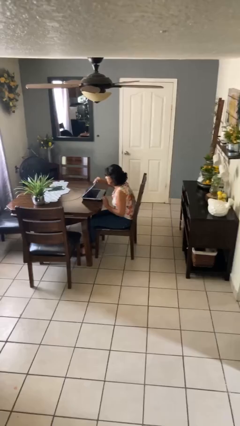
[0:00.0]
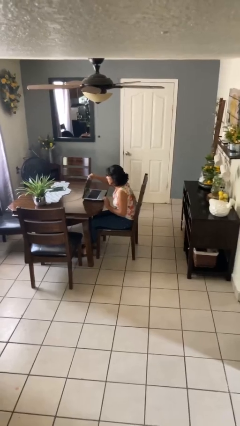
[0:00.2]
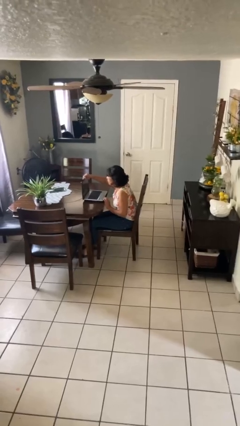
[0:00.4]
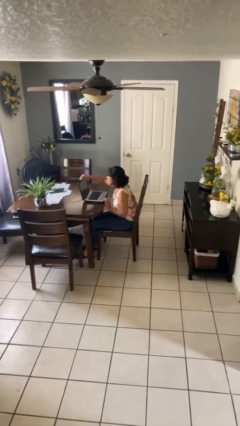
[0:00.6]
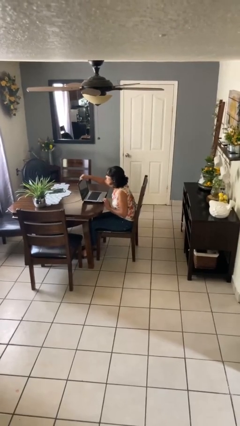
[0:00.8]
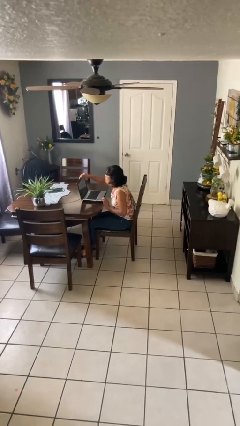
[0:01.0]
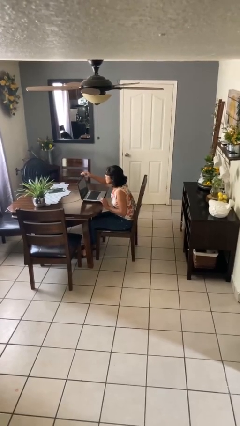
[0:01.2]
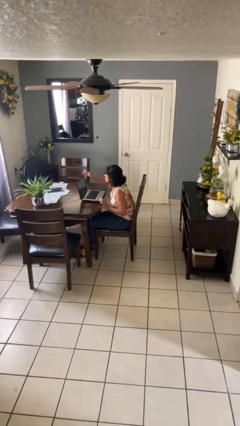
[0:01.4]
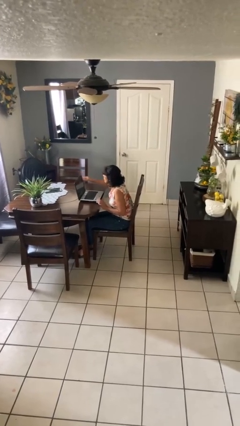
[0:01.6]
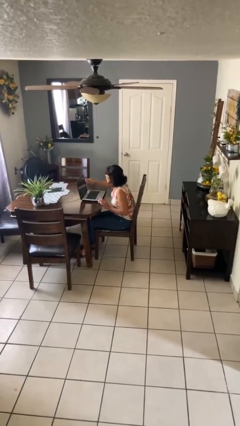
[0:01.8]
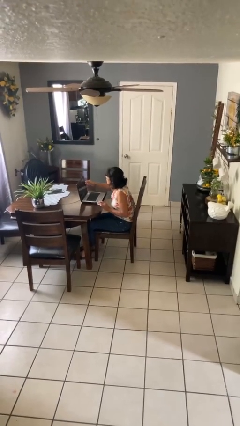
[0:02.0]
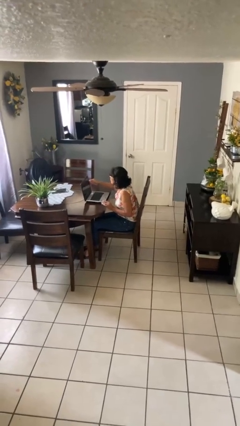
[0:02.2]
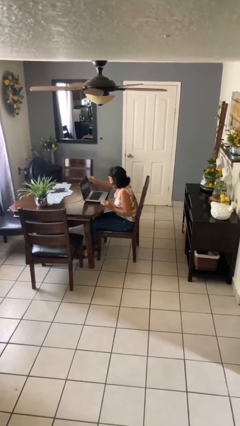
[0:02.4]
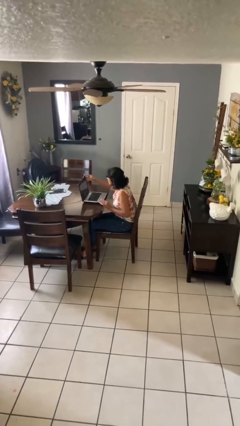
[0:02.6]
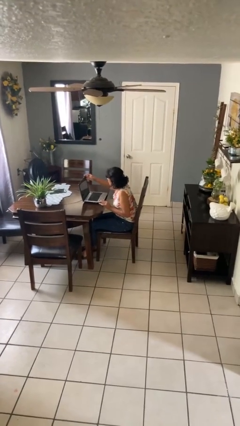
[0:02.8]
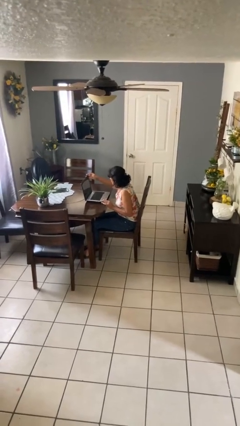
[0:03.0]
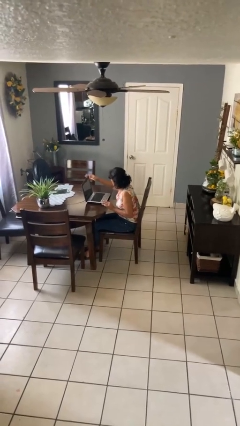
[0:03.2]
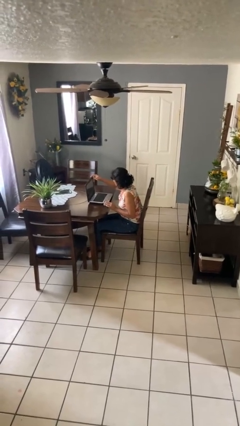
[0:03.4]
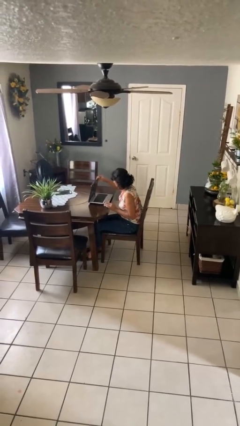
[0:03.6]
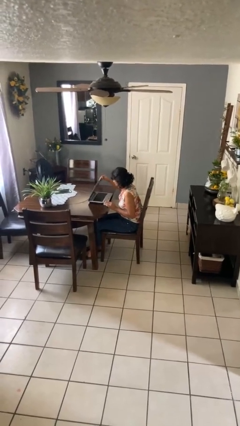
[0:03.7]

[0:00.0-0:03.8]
person opens laptop

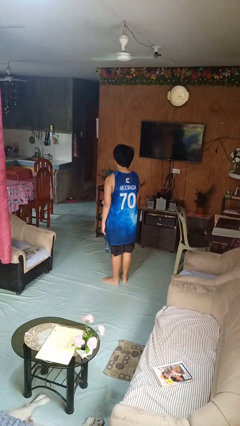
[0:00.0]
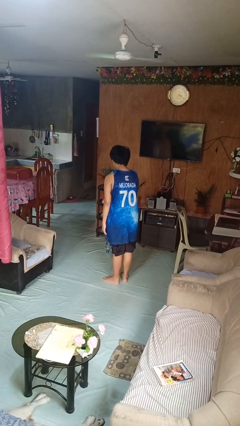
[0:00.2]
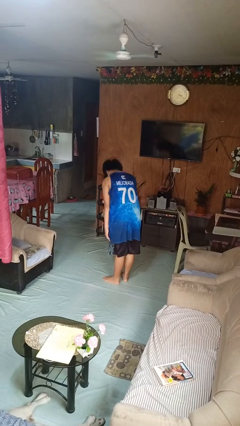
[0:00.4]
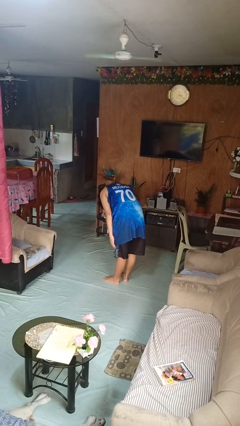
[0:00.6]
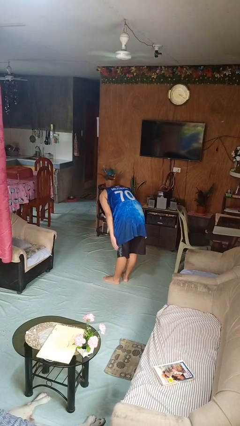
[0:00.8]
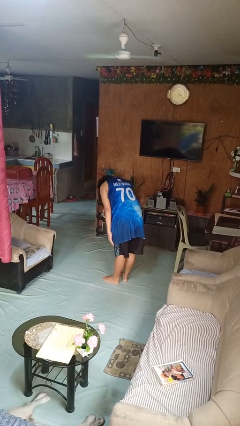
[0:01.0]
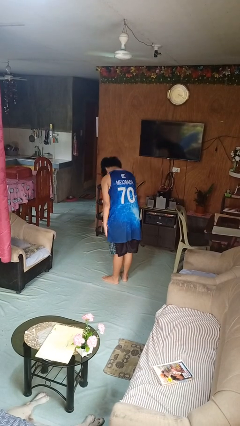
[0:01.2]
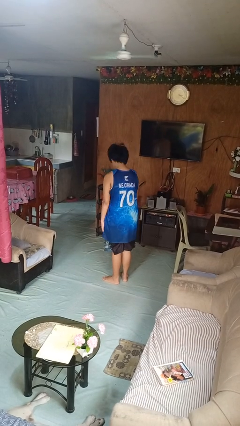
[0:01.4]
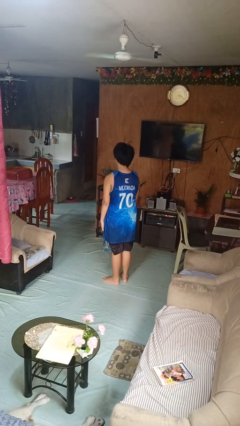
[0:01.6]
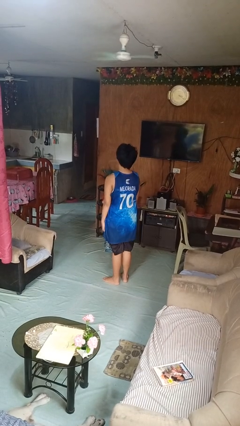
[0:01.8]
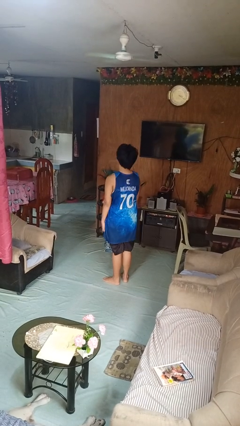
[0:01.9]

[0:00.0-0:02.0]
person bows

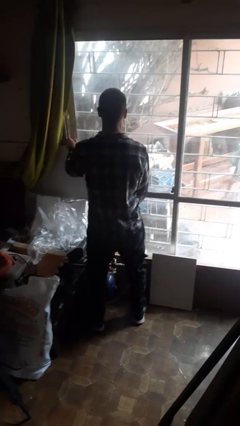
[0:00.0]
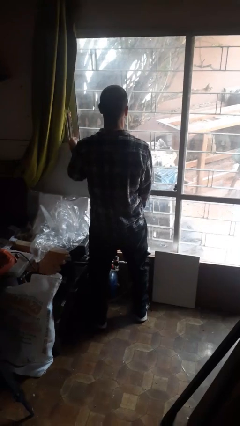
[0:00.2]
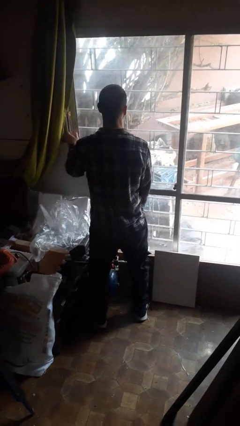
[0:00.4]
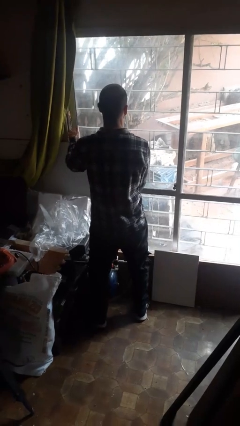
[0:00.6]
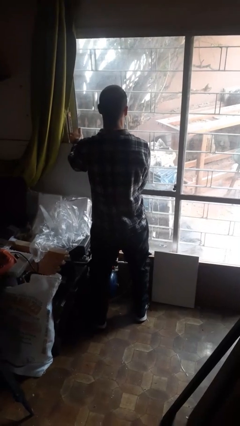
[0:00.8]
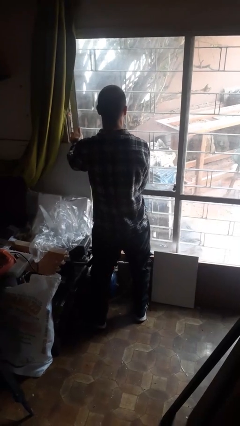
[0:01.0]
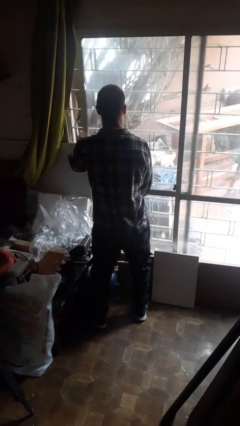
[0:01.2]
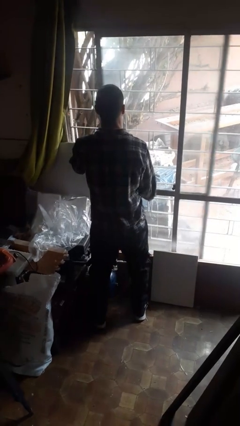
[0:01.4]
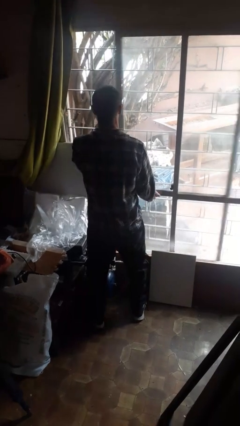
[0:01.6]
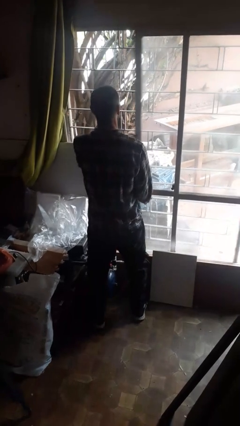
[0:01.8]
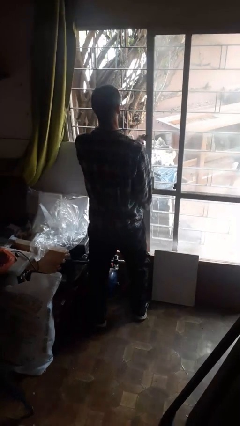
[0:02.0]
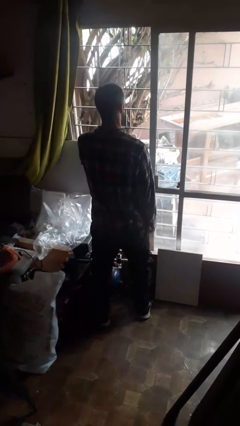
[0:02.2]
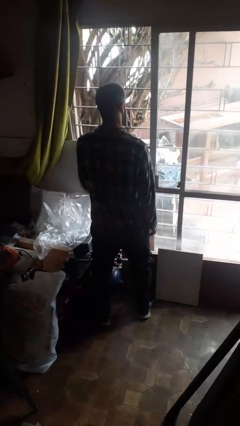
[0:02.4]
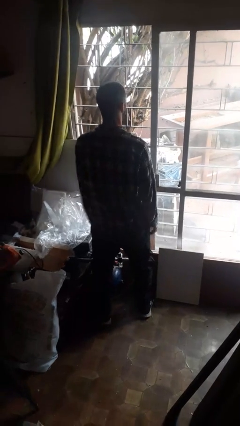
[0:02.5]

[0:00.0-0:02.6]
person opens sliding door

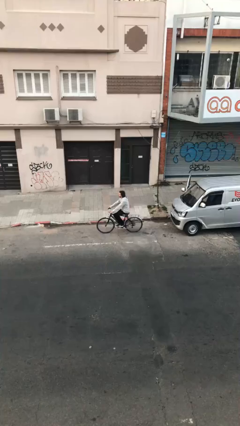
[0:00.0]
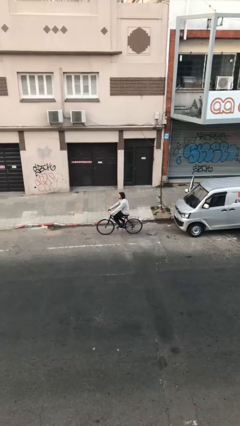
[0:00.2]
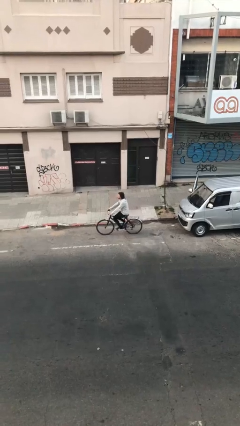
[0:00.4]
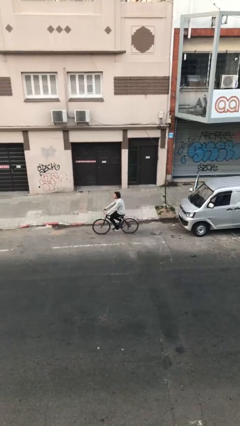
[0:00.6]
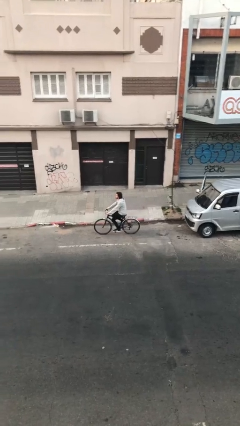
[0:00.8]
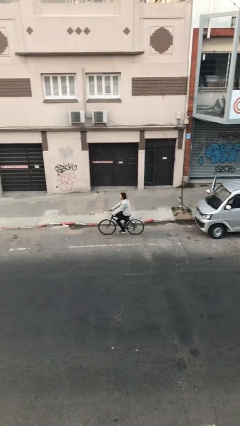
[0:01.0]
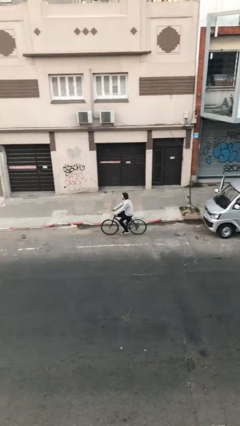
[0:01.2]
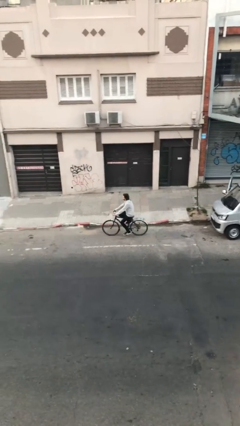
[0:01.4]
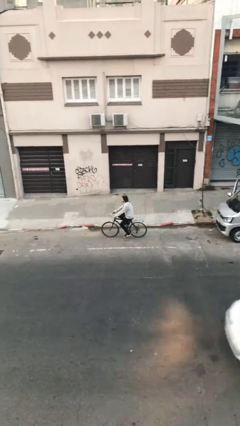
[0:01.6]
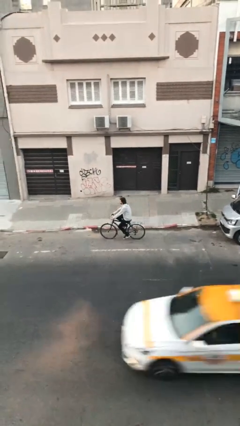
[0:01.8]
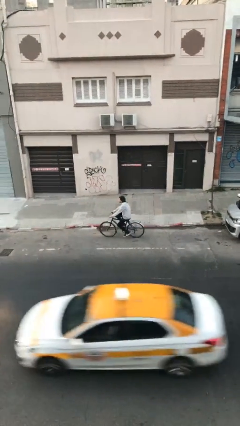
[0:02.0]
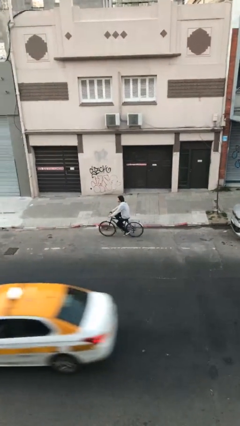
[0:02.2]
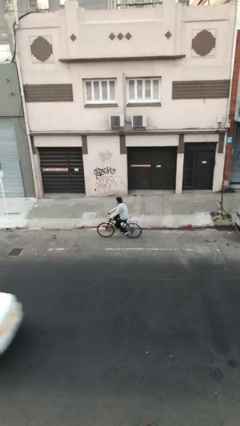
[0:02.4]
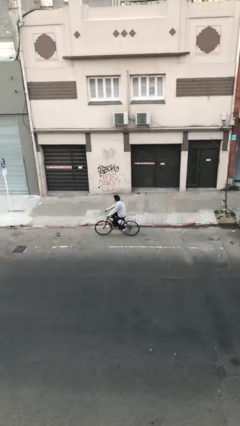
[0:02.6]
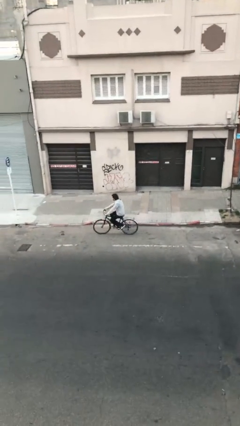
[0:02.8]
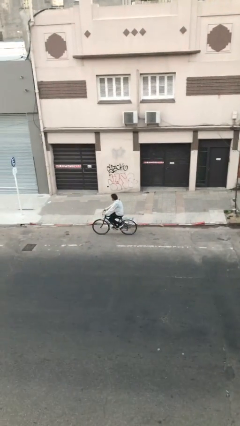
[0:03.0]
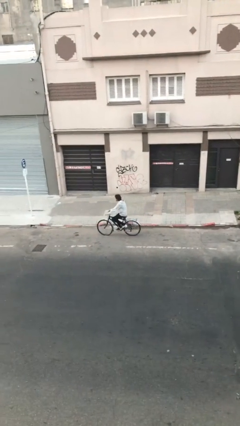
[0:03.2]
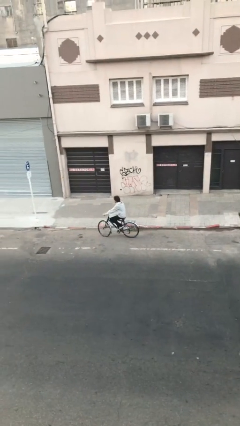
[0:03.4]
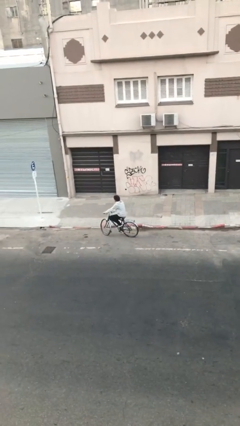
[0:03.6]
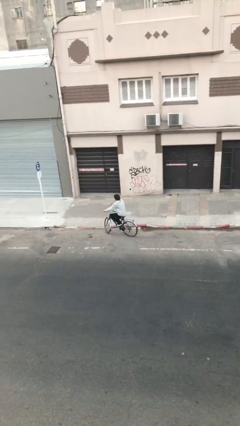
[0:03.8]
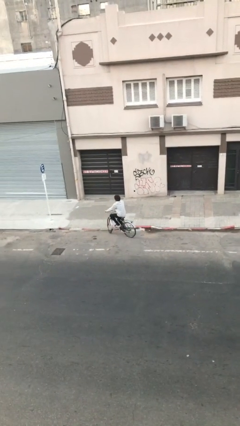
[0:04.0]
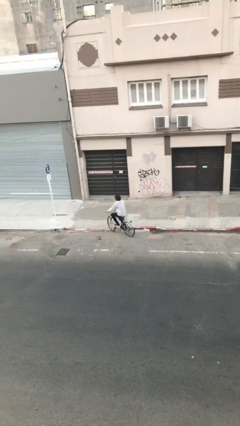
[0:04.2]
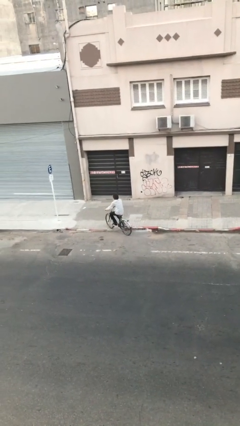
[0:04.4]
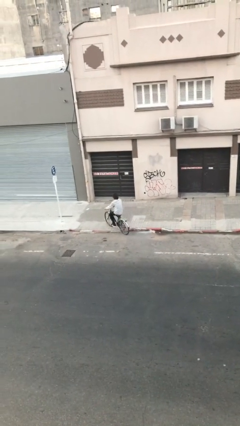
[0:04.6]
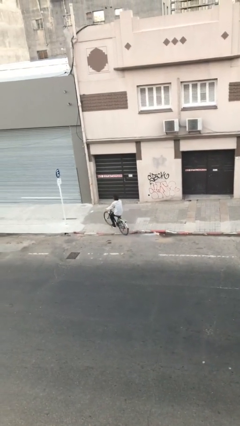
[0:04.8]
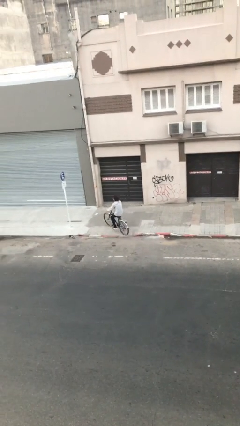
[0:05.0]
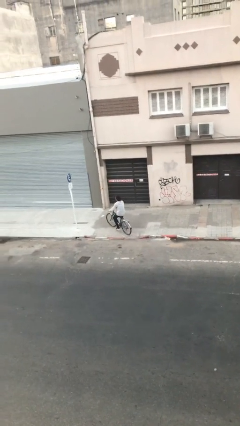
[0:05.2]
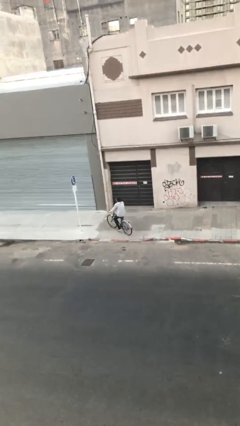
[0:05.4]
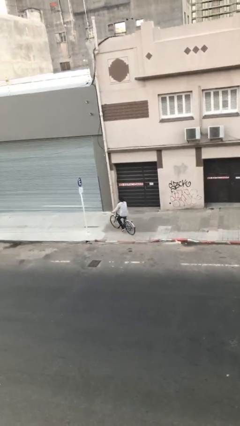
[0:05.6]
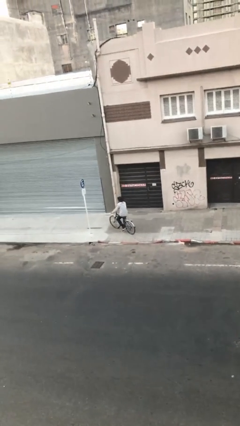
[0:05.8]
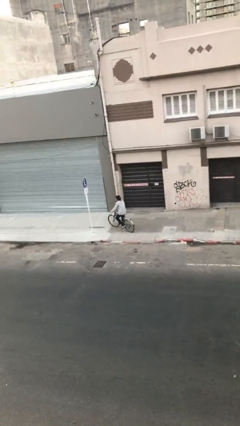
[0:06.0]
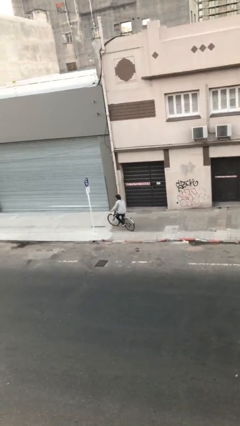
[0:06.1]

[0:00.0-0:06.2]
person rides bicycle

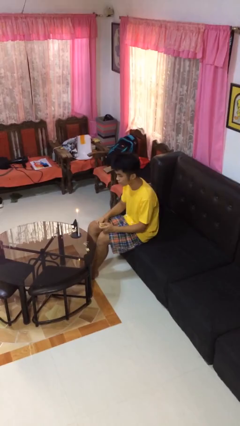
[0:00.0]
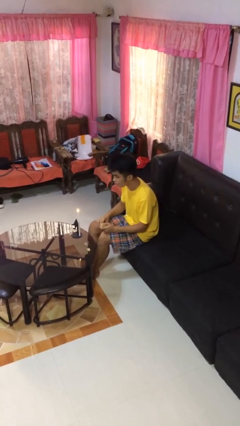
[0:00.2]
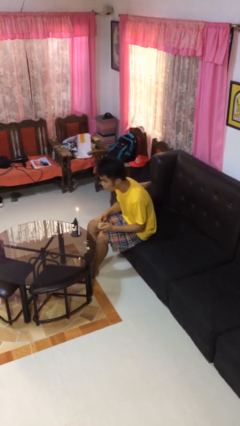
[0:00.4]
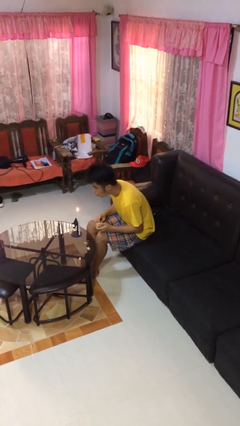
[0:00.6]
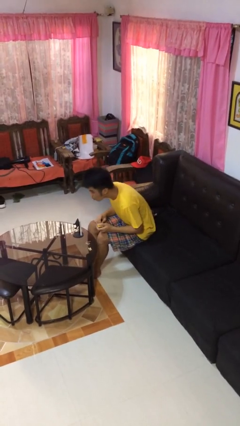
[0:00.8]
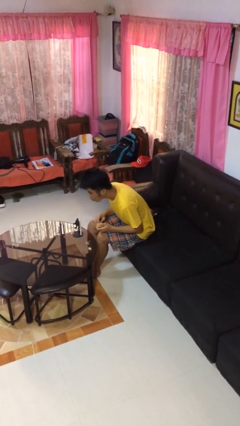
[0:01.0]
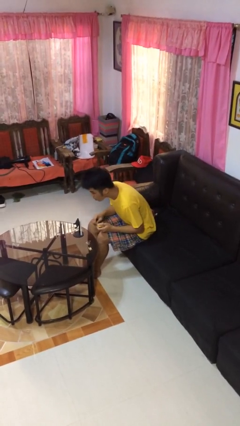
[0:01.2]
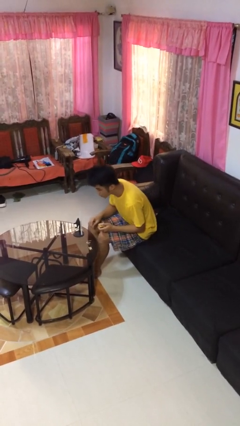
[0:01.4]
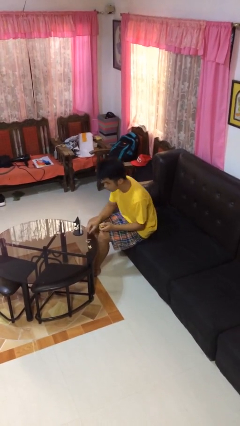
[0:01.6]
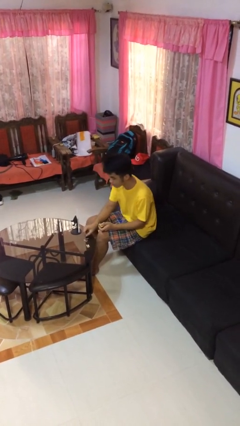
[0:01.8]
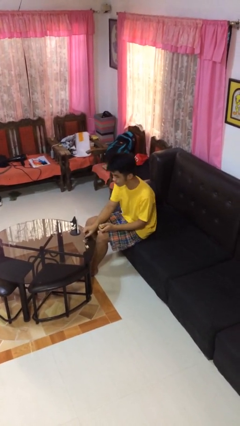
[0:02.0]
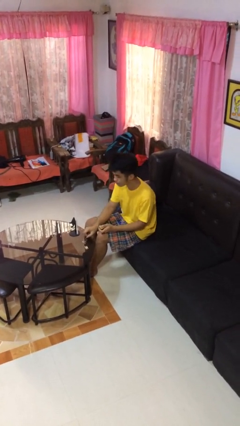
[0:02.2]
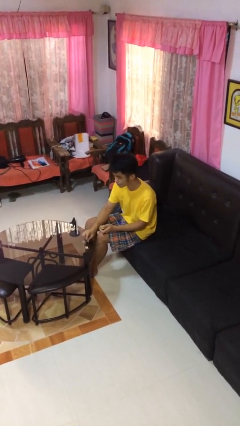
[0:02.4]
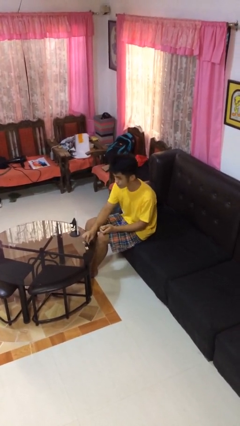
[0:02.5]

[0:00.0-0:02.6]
person extinguishes candle

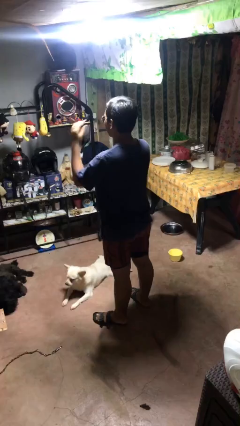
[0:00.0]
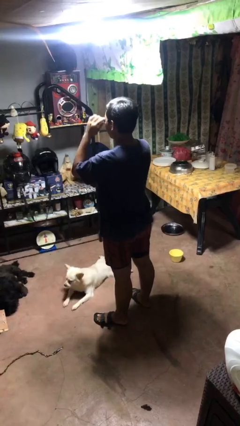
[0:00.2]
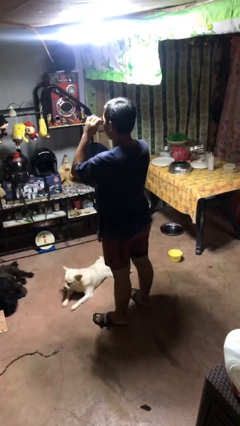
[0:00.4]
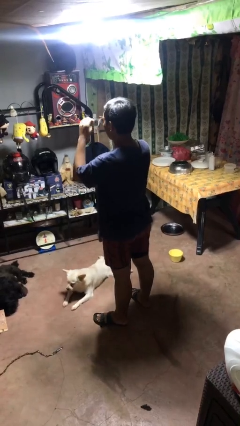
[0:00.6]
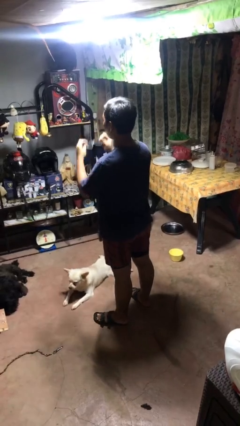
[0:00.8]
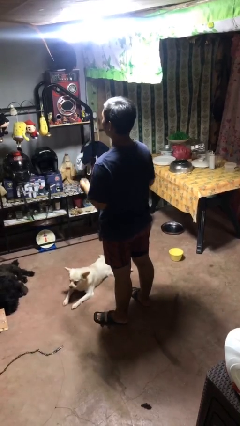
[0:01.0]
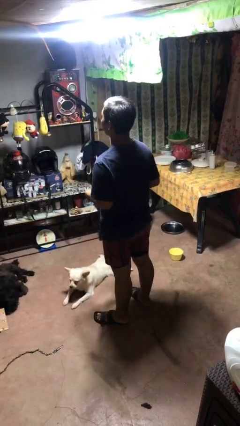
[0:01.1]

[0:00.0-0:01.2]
person takes off sunglasses
